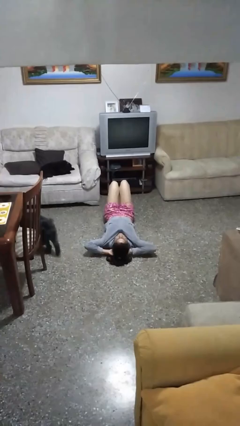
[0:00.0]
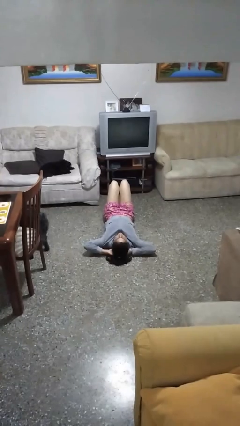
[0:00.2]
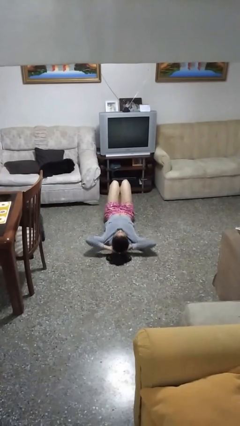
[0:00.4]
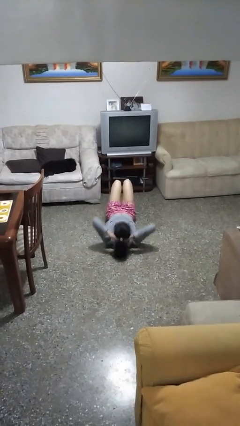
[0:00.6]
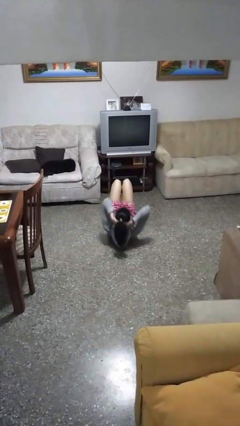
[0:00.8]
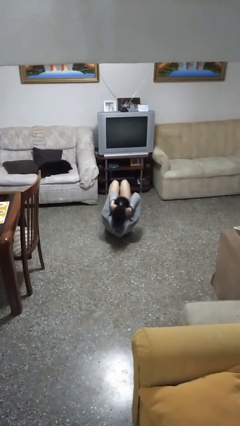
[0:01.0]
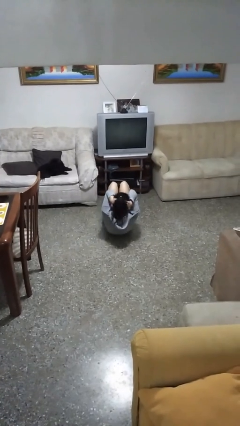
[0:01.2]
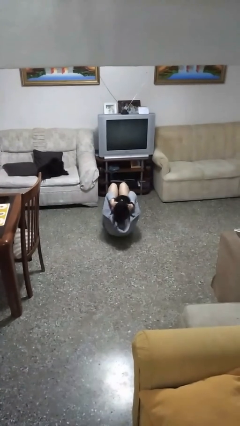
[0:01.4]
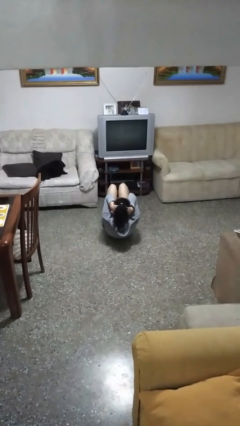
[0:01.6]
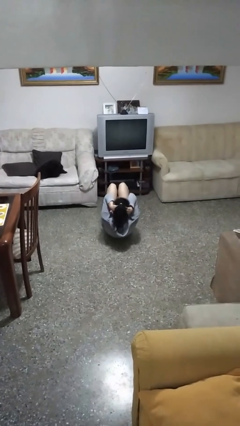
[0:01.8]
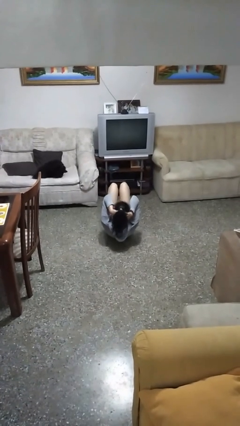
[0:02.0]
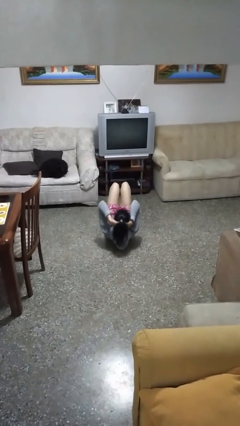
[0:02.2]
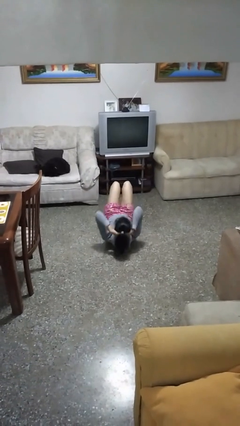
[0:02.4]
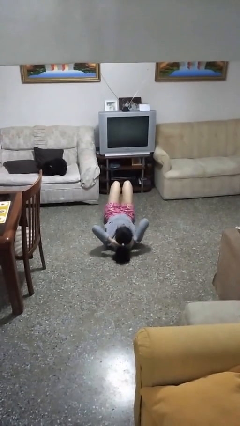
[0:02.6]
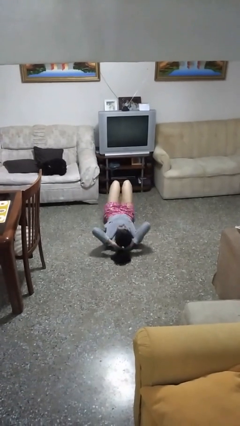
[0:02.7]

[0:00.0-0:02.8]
person exercises with situp

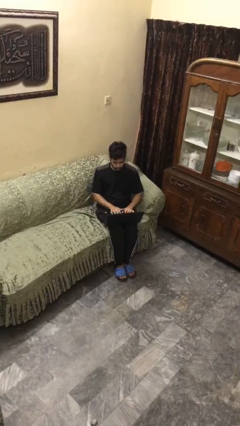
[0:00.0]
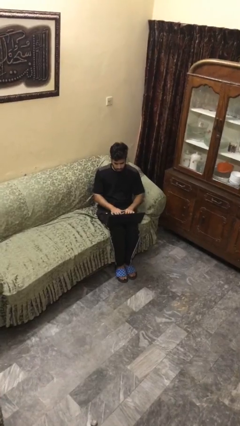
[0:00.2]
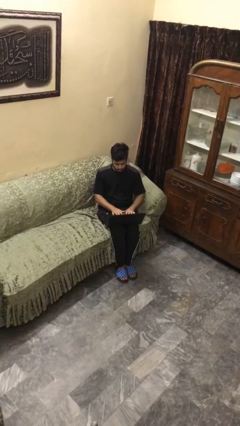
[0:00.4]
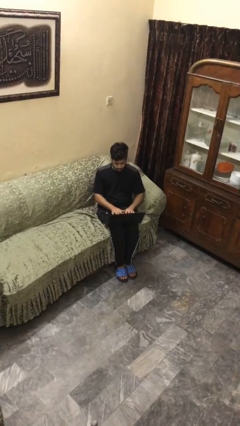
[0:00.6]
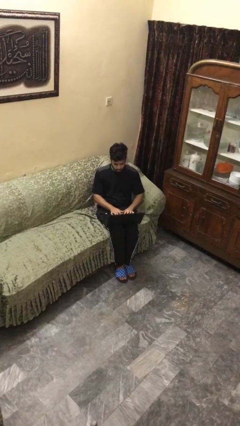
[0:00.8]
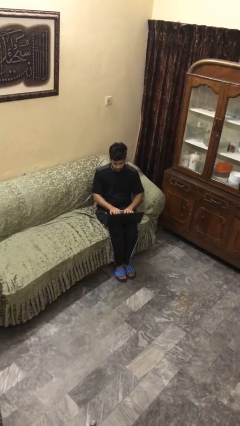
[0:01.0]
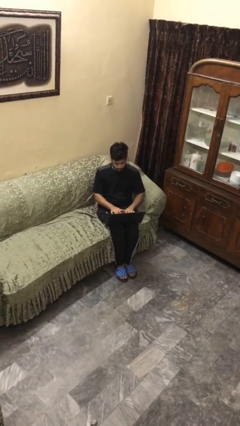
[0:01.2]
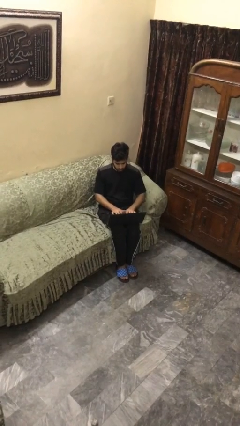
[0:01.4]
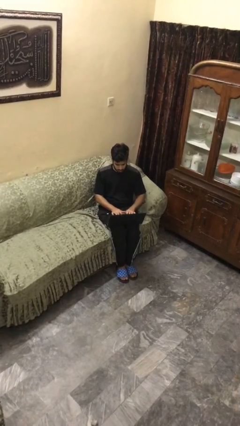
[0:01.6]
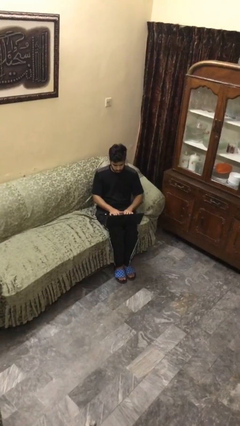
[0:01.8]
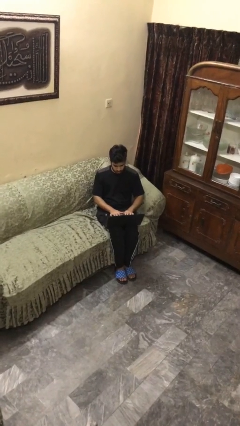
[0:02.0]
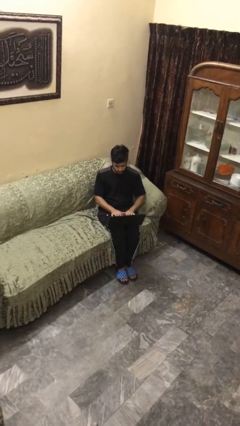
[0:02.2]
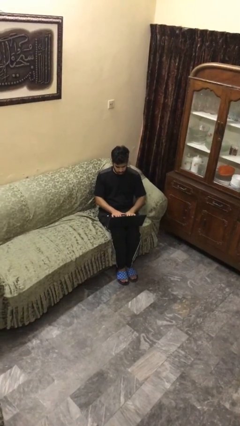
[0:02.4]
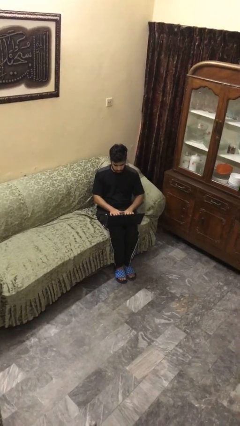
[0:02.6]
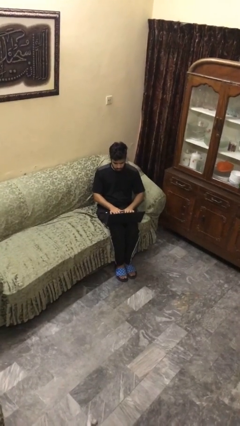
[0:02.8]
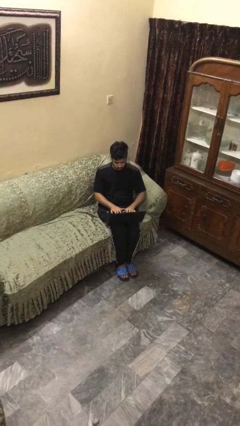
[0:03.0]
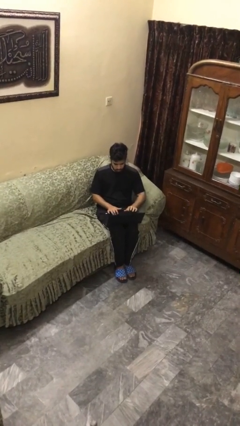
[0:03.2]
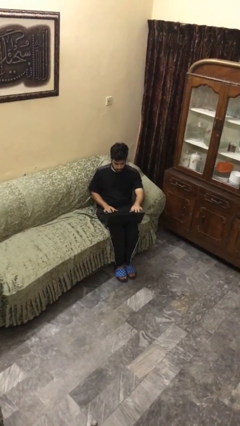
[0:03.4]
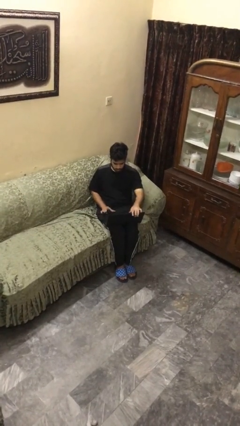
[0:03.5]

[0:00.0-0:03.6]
person interacts with laptop

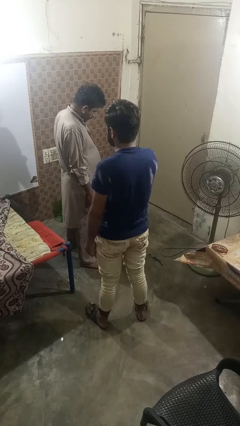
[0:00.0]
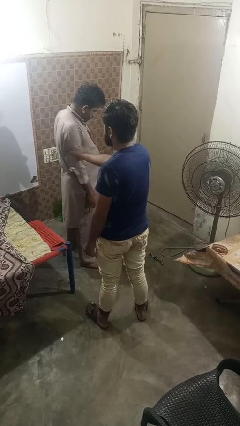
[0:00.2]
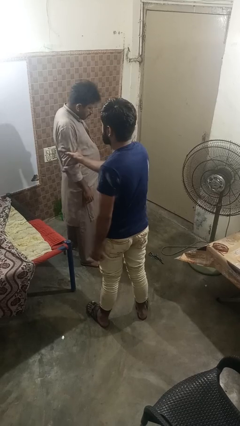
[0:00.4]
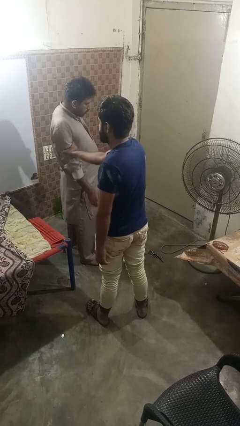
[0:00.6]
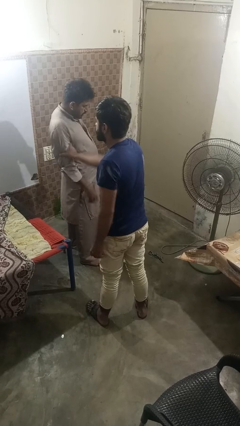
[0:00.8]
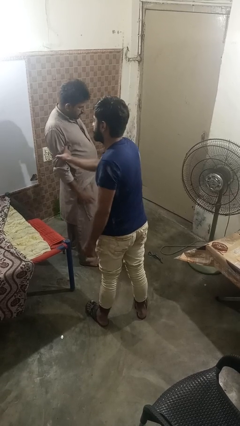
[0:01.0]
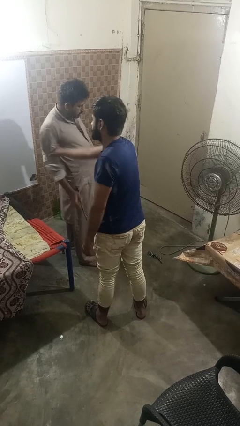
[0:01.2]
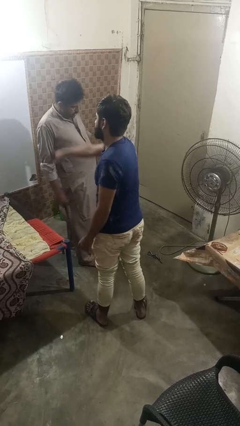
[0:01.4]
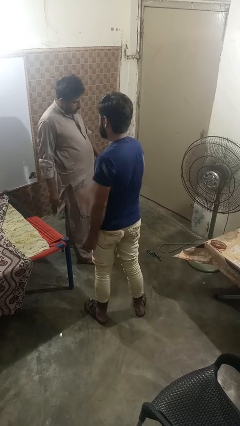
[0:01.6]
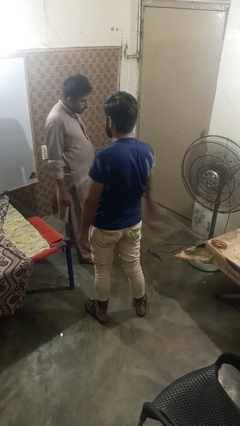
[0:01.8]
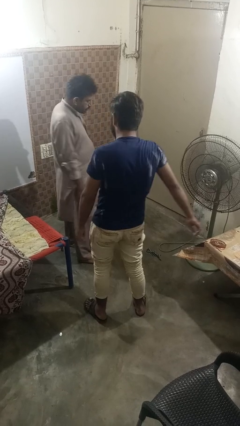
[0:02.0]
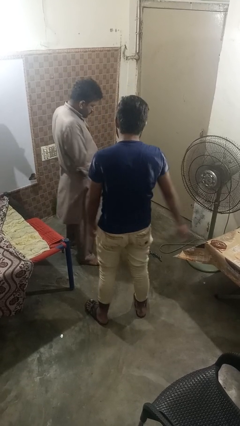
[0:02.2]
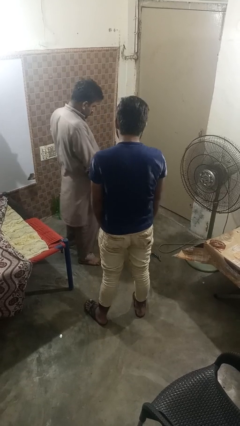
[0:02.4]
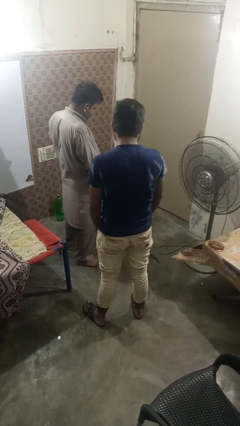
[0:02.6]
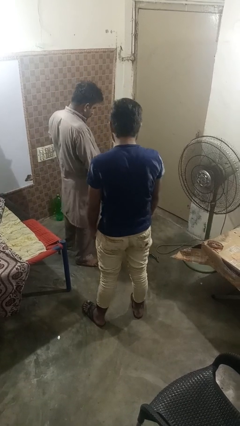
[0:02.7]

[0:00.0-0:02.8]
person grabs person by bicep

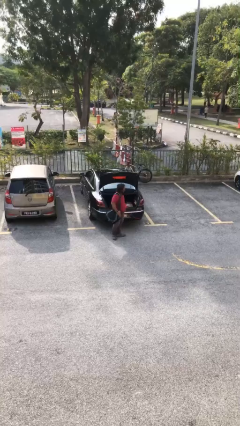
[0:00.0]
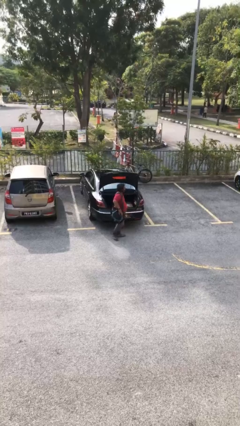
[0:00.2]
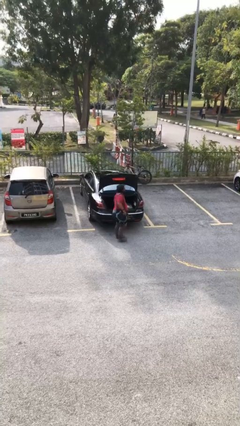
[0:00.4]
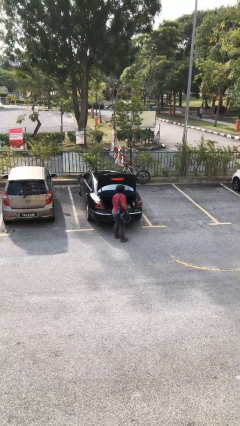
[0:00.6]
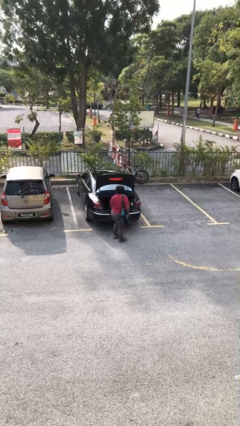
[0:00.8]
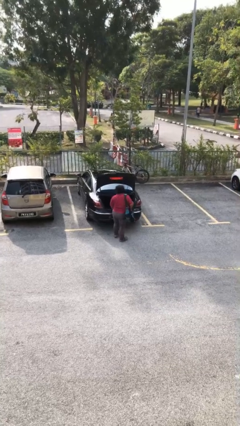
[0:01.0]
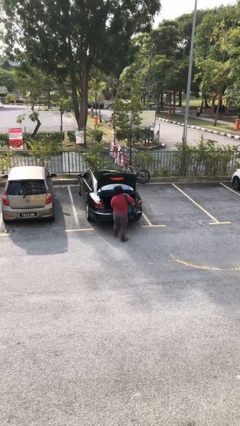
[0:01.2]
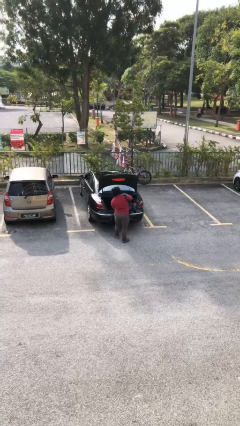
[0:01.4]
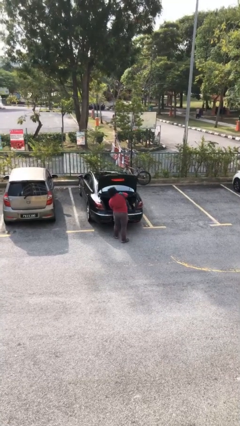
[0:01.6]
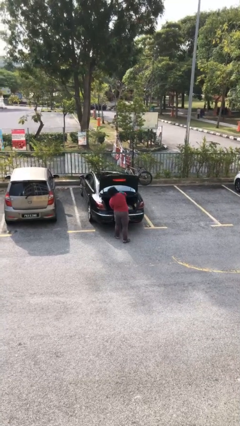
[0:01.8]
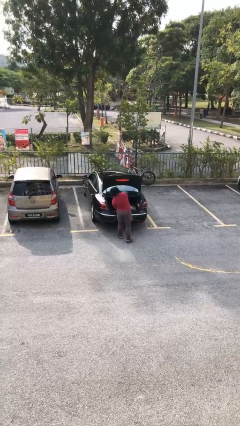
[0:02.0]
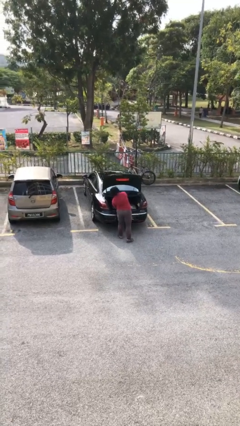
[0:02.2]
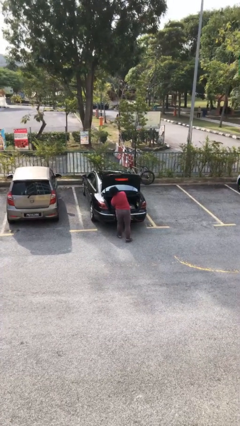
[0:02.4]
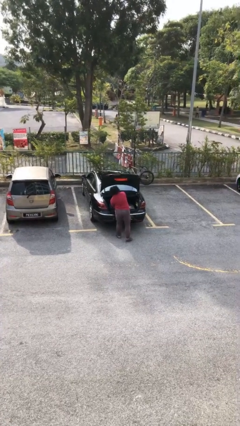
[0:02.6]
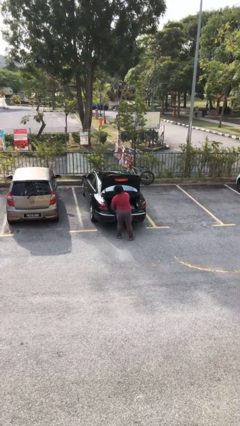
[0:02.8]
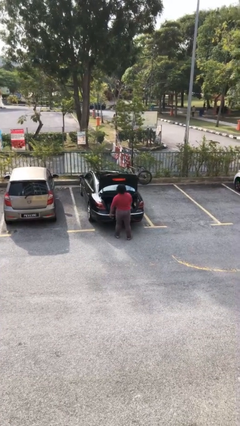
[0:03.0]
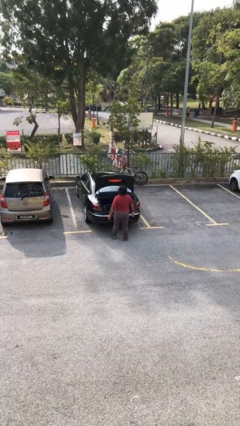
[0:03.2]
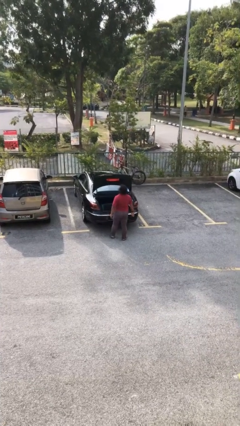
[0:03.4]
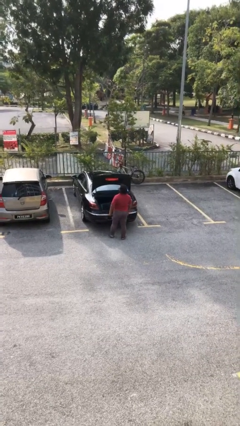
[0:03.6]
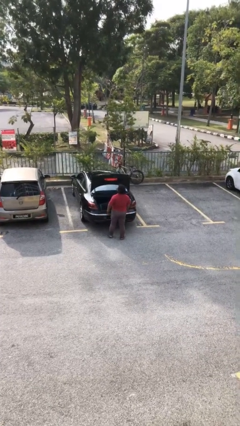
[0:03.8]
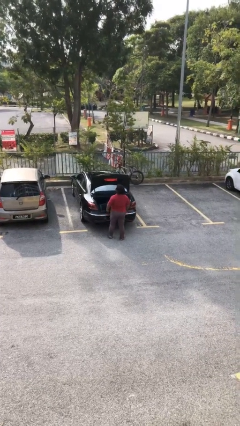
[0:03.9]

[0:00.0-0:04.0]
person loads car

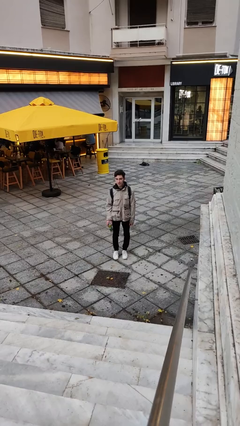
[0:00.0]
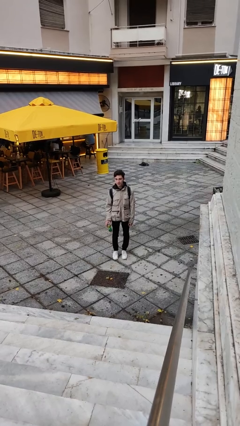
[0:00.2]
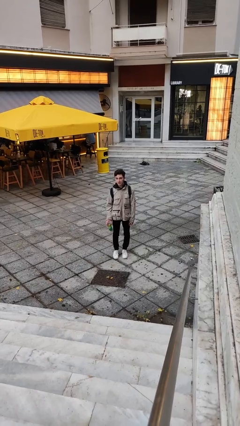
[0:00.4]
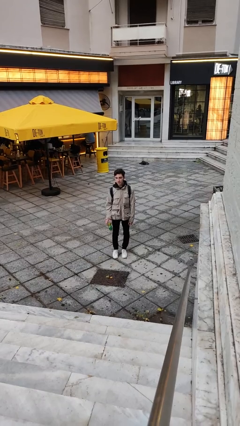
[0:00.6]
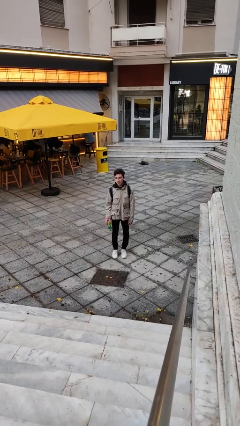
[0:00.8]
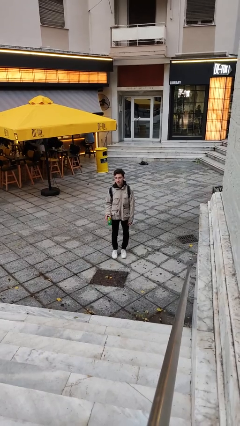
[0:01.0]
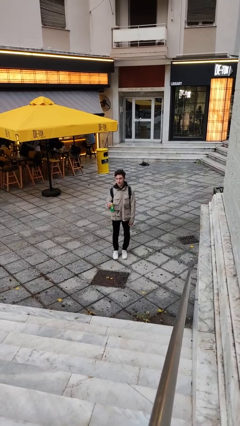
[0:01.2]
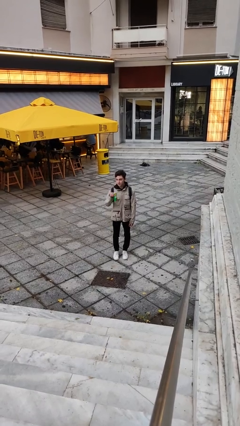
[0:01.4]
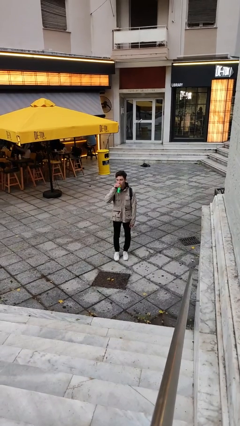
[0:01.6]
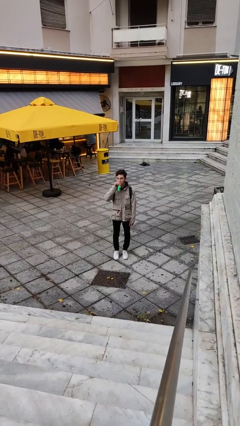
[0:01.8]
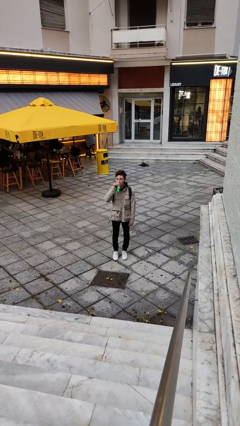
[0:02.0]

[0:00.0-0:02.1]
person opens beverage can

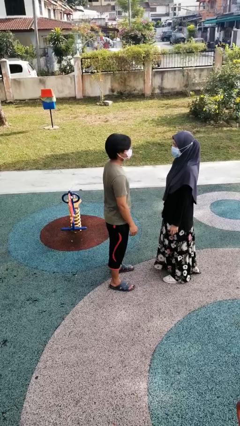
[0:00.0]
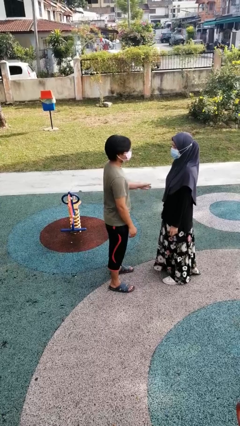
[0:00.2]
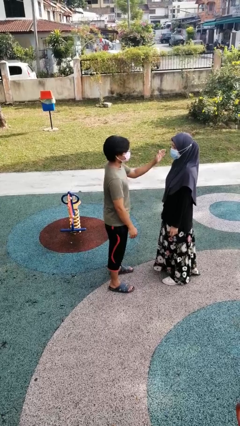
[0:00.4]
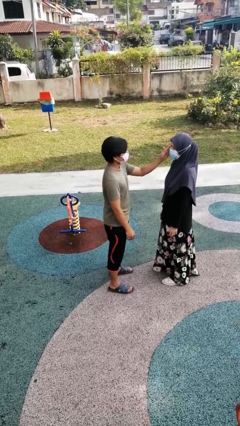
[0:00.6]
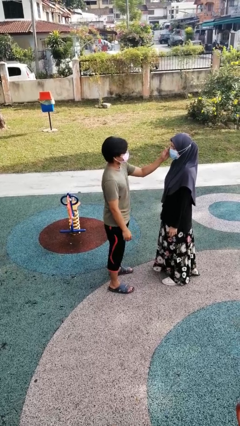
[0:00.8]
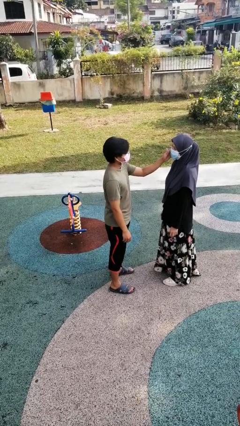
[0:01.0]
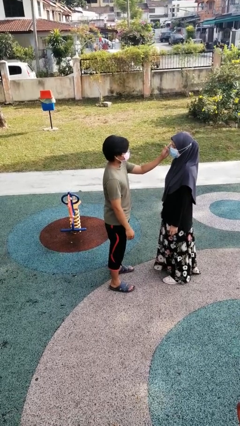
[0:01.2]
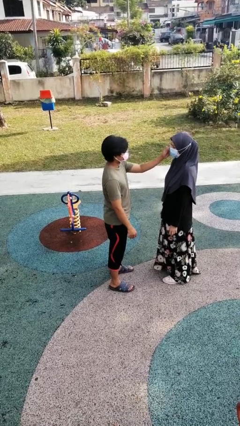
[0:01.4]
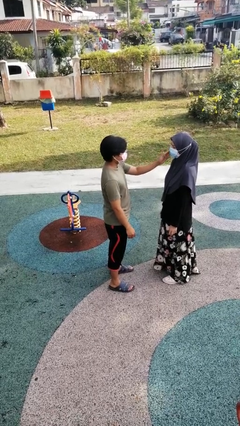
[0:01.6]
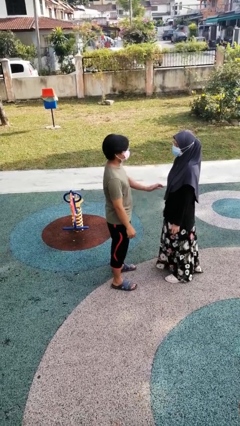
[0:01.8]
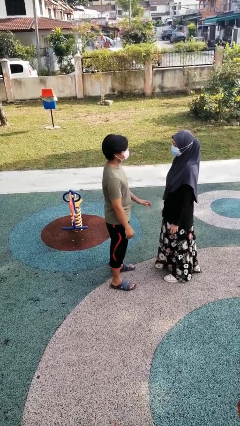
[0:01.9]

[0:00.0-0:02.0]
person touches face of person
